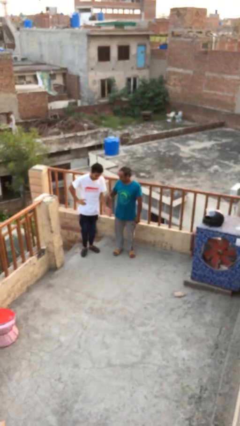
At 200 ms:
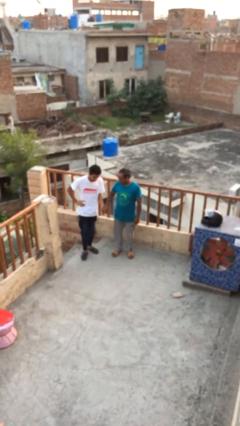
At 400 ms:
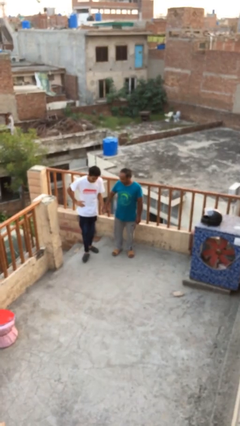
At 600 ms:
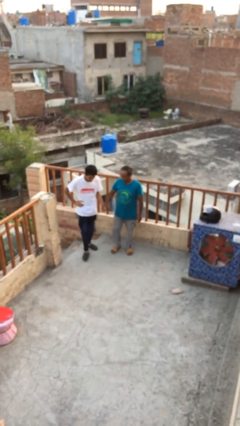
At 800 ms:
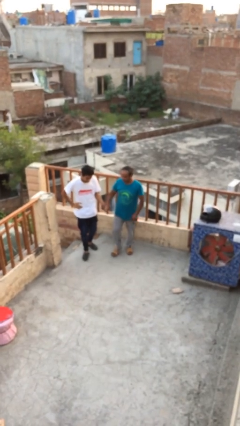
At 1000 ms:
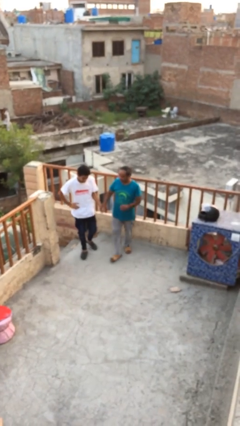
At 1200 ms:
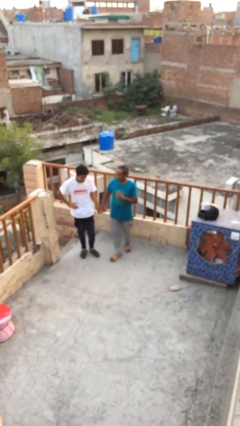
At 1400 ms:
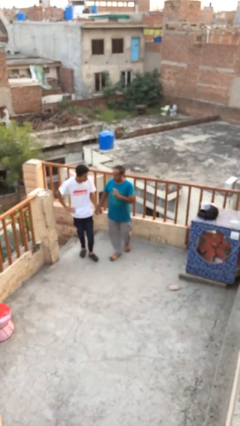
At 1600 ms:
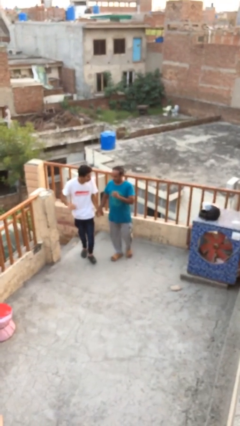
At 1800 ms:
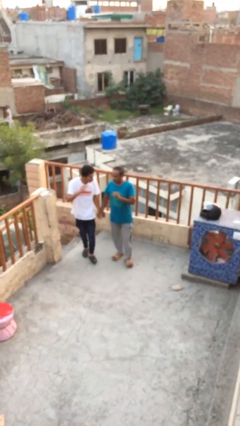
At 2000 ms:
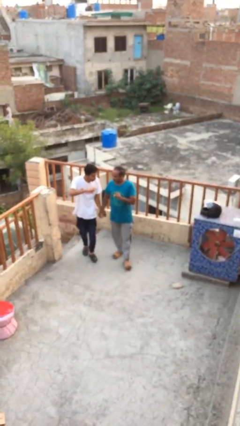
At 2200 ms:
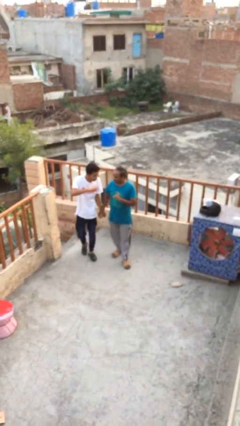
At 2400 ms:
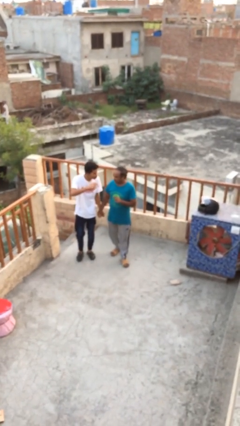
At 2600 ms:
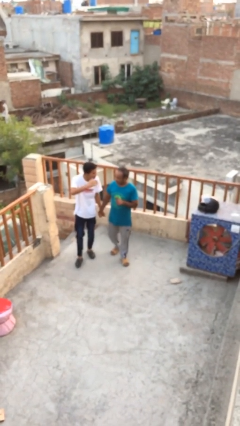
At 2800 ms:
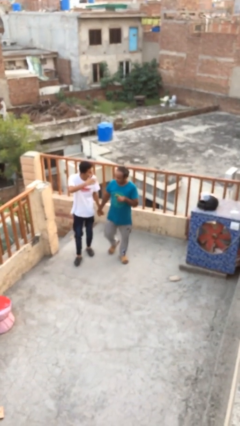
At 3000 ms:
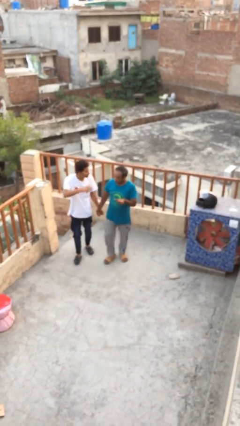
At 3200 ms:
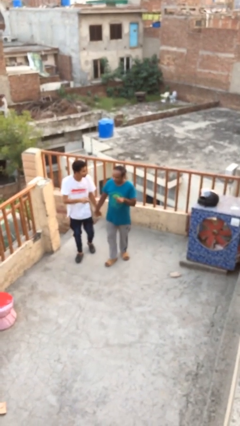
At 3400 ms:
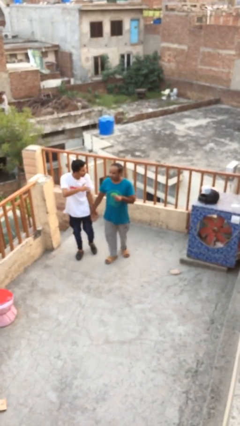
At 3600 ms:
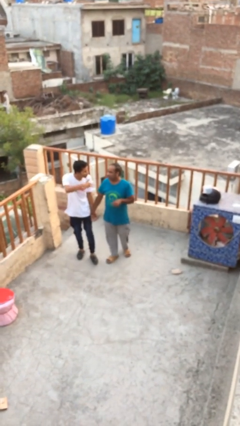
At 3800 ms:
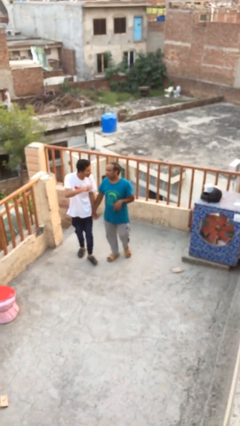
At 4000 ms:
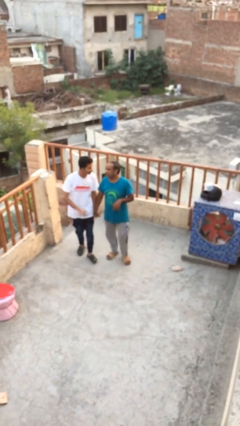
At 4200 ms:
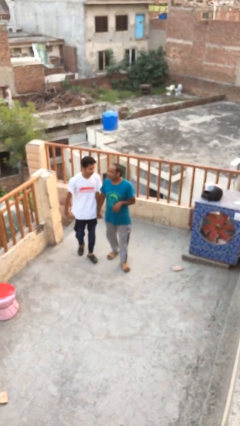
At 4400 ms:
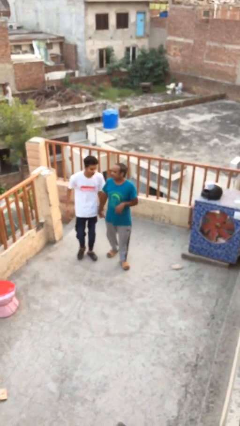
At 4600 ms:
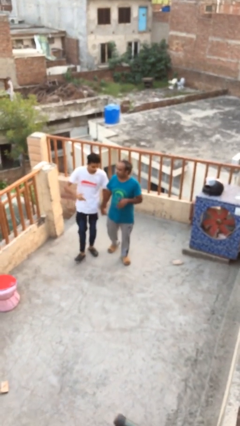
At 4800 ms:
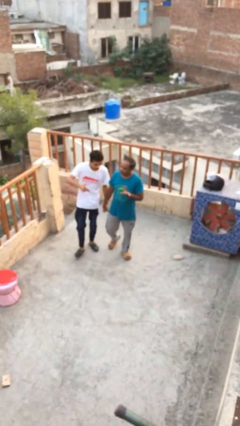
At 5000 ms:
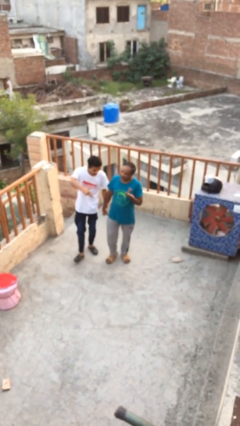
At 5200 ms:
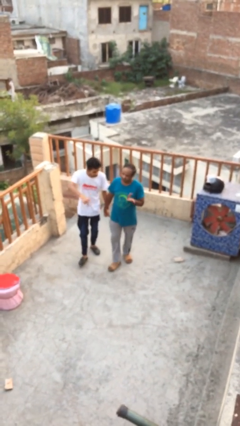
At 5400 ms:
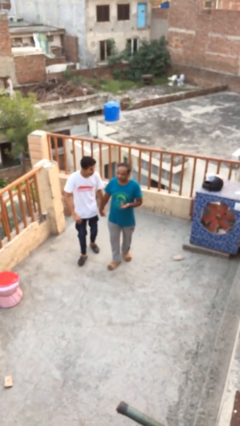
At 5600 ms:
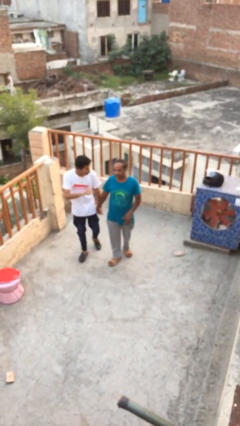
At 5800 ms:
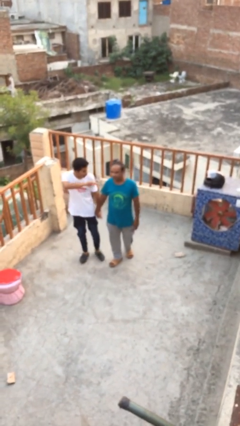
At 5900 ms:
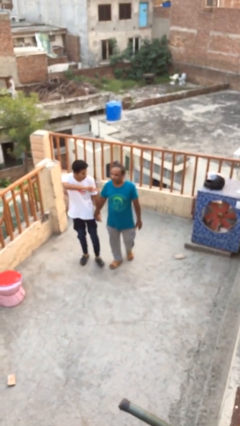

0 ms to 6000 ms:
person holds hand

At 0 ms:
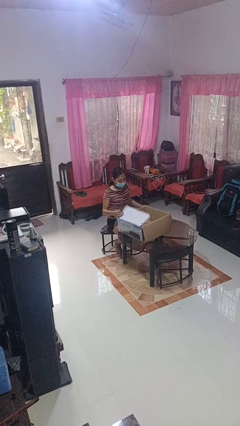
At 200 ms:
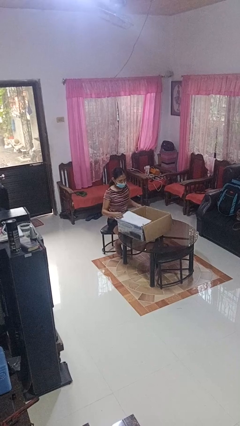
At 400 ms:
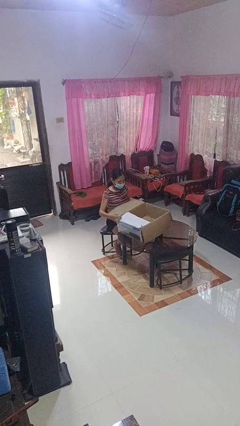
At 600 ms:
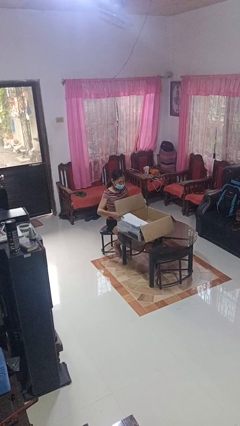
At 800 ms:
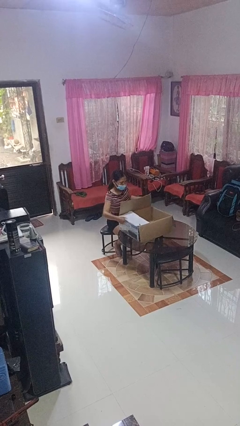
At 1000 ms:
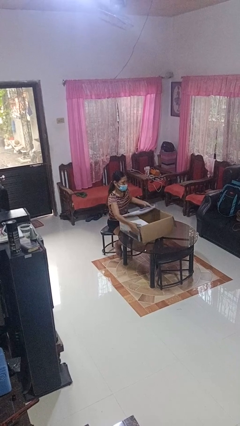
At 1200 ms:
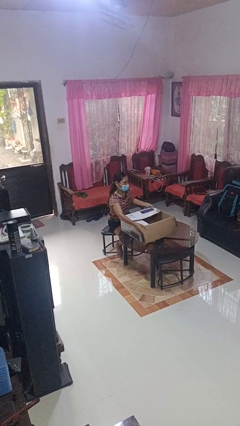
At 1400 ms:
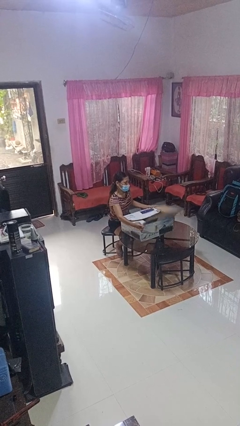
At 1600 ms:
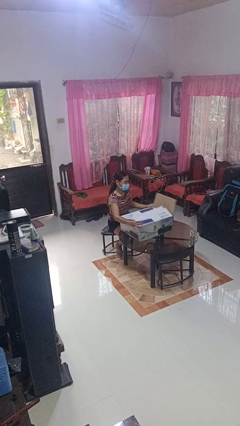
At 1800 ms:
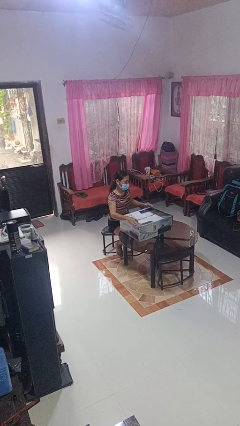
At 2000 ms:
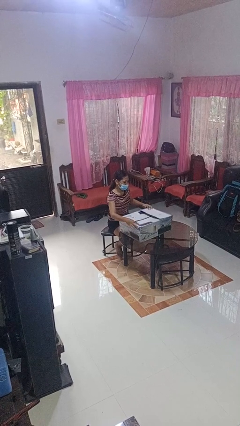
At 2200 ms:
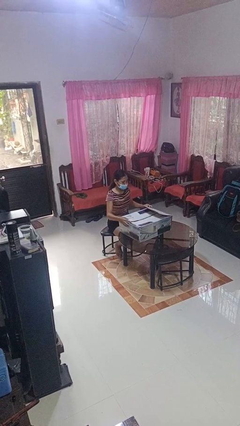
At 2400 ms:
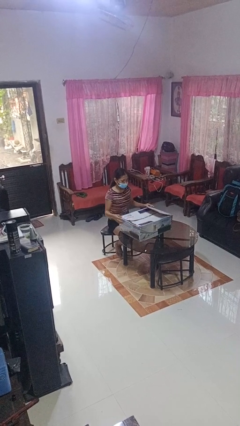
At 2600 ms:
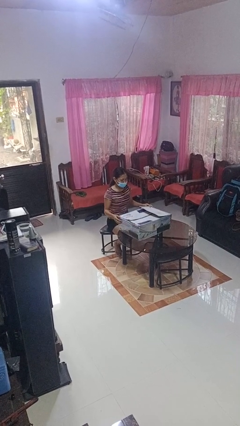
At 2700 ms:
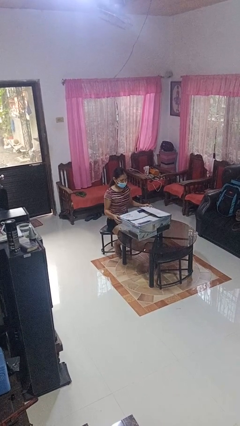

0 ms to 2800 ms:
person closes box

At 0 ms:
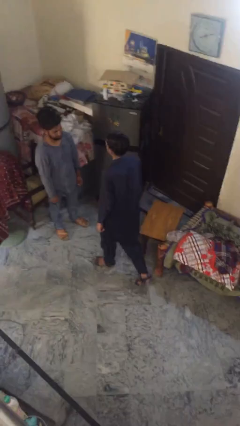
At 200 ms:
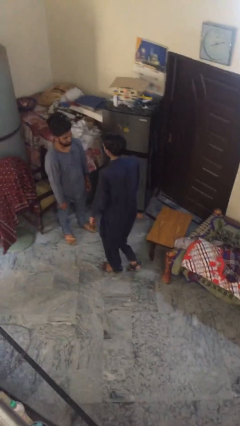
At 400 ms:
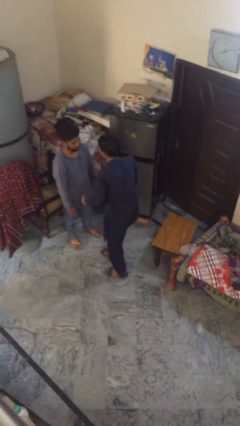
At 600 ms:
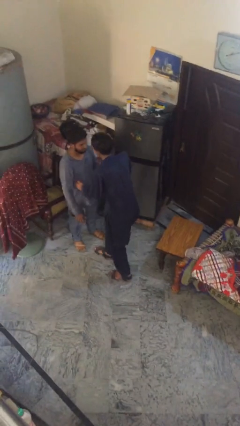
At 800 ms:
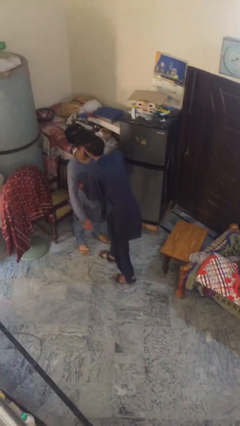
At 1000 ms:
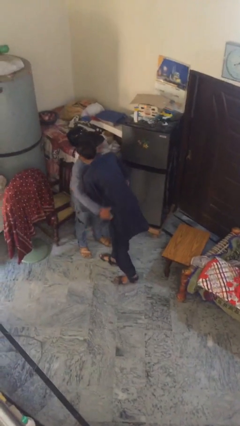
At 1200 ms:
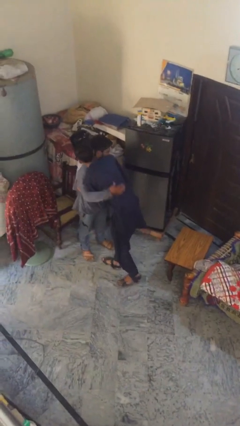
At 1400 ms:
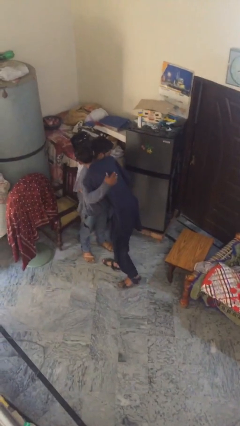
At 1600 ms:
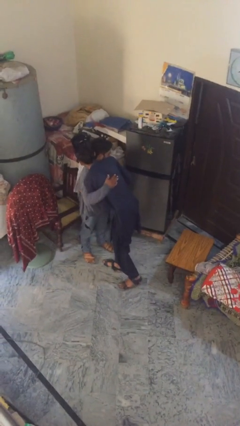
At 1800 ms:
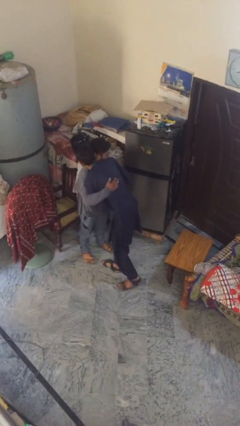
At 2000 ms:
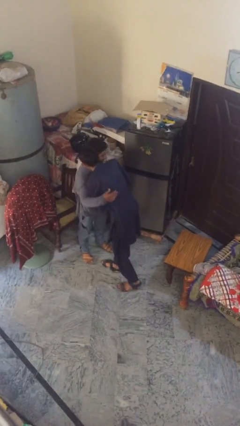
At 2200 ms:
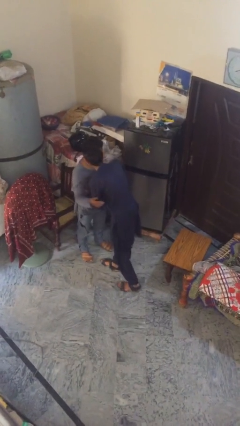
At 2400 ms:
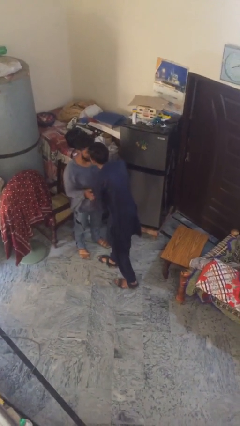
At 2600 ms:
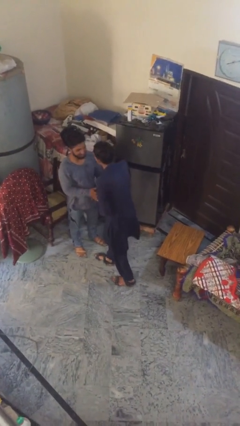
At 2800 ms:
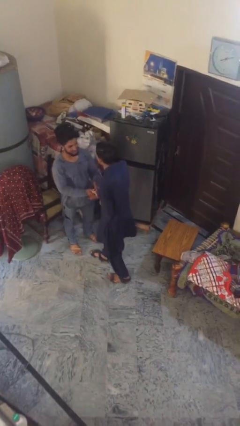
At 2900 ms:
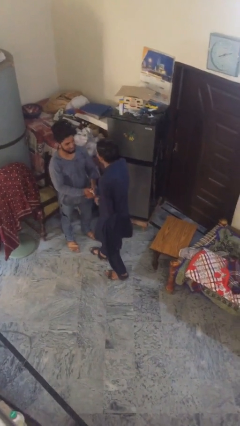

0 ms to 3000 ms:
person embraces person

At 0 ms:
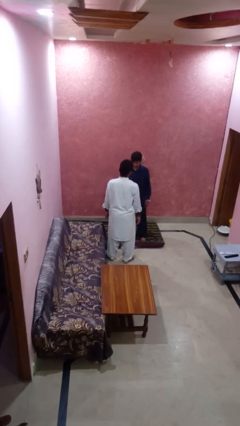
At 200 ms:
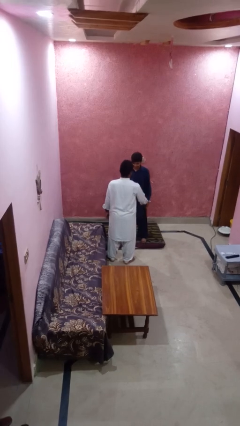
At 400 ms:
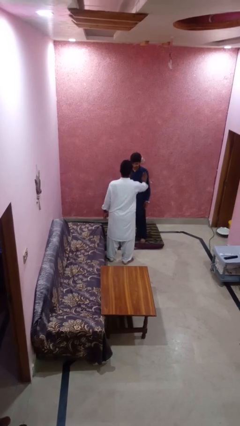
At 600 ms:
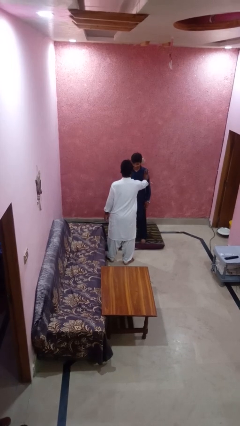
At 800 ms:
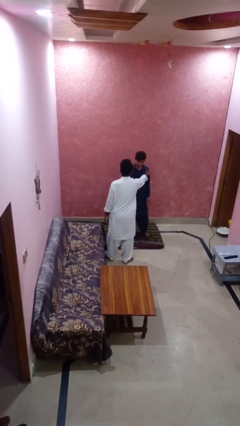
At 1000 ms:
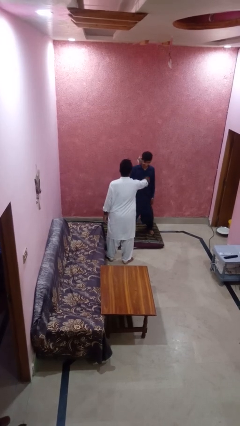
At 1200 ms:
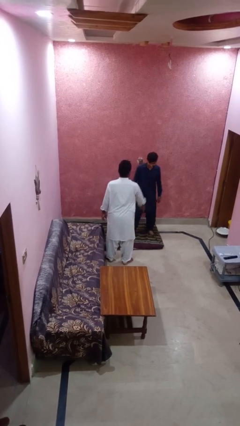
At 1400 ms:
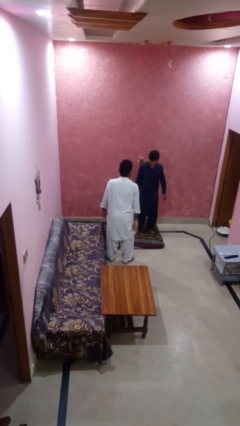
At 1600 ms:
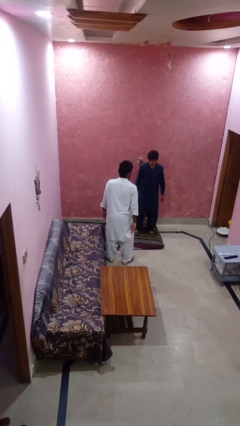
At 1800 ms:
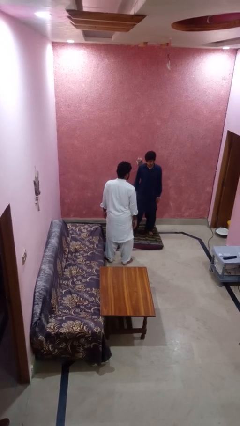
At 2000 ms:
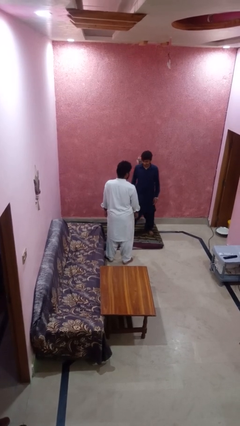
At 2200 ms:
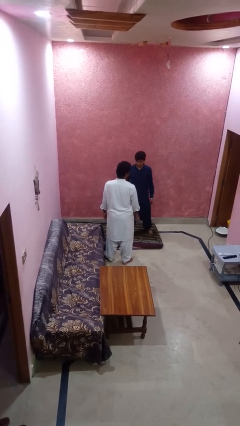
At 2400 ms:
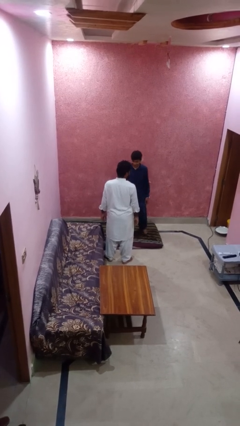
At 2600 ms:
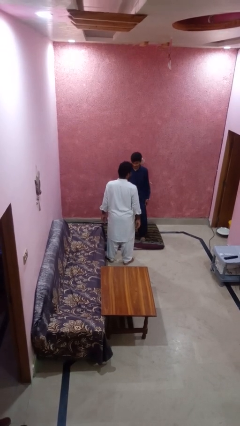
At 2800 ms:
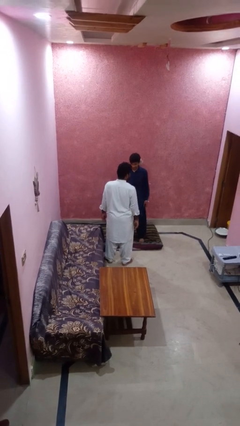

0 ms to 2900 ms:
person shoves person

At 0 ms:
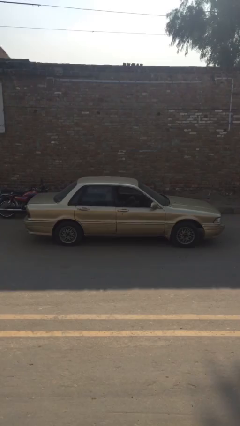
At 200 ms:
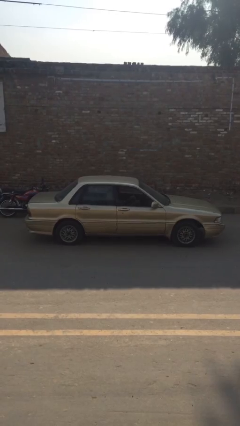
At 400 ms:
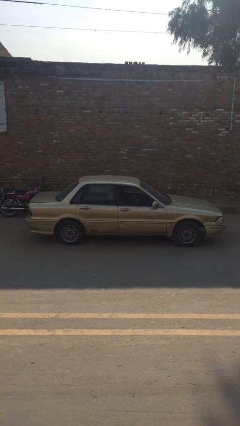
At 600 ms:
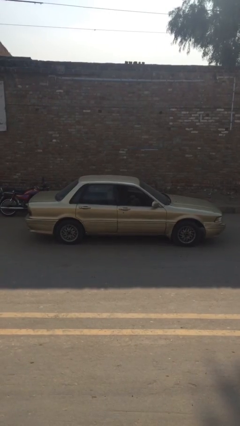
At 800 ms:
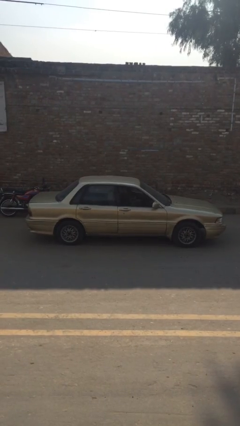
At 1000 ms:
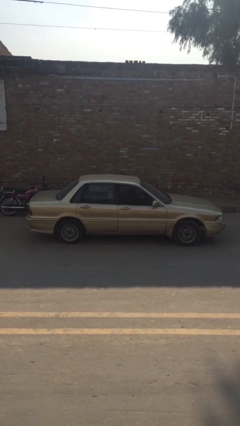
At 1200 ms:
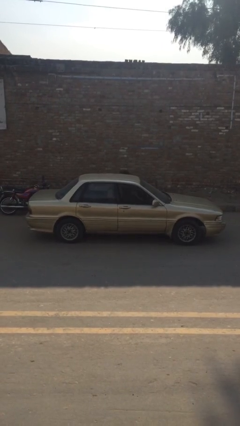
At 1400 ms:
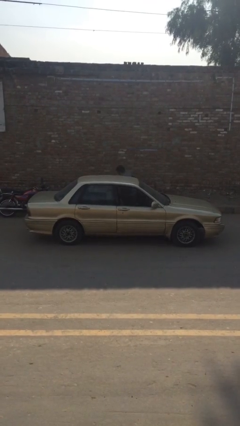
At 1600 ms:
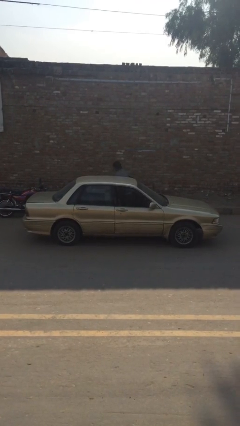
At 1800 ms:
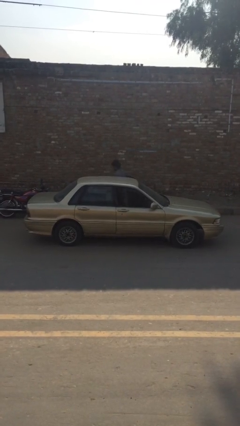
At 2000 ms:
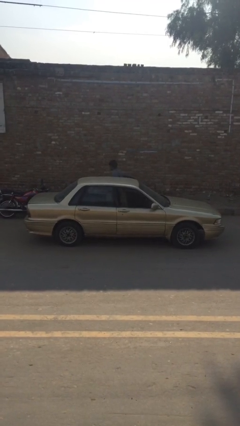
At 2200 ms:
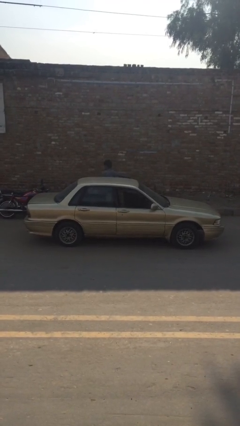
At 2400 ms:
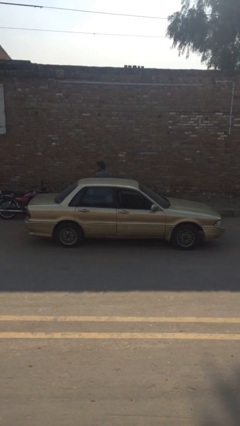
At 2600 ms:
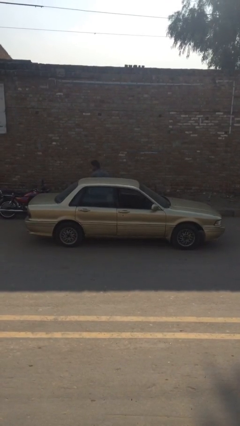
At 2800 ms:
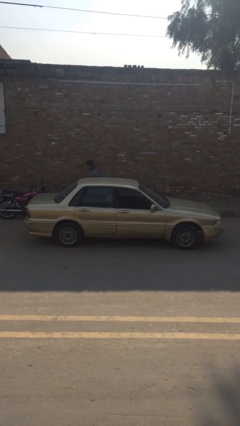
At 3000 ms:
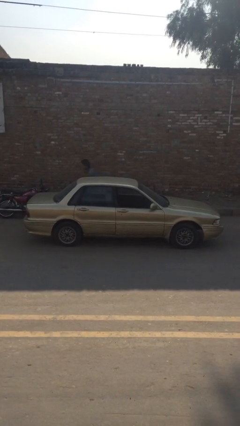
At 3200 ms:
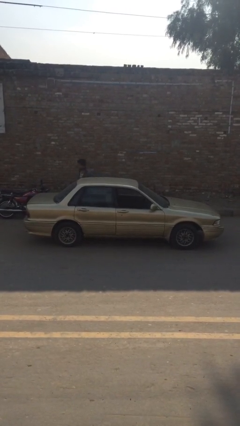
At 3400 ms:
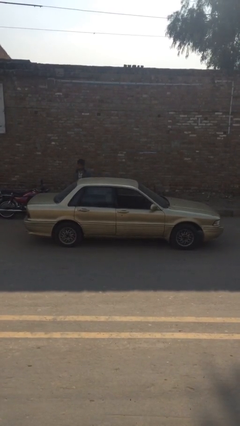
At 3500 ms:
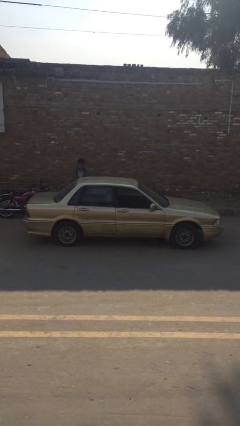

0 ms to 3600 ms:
car drops off person
